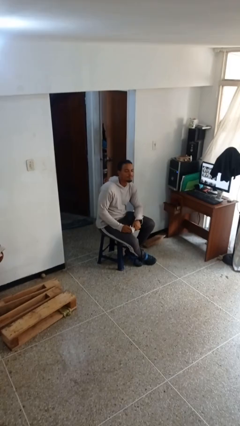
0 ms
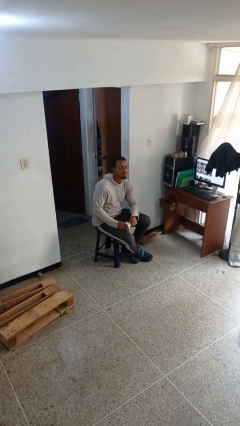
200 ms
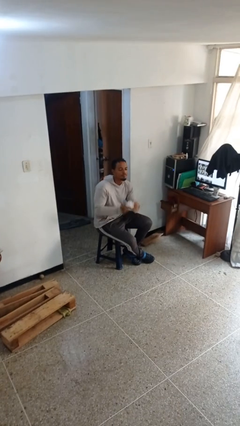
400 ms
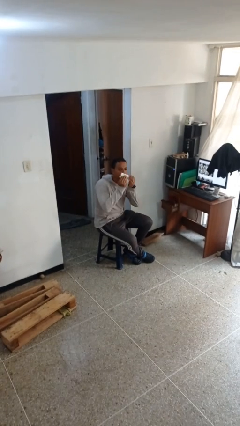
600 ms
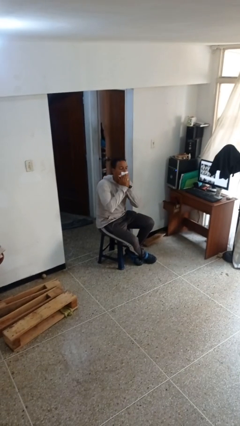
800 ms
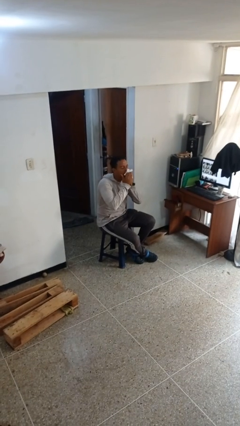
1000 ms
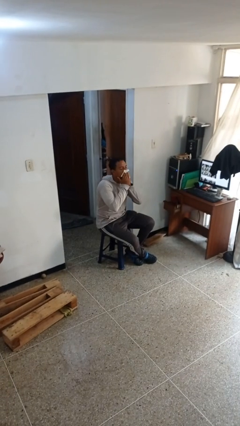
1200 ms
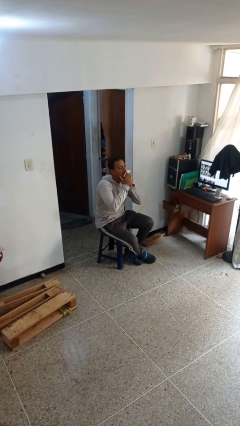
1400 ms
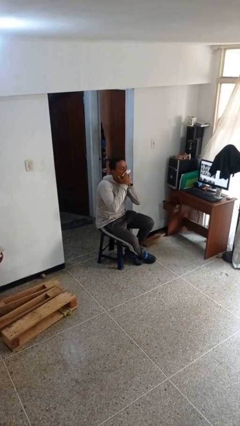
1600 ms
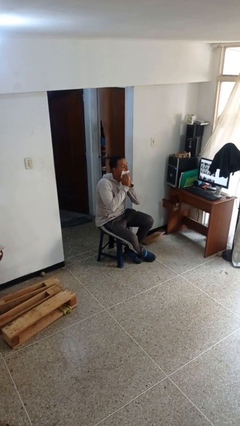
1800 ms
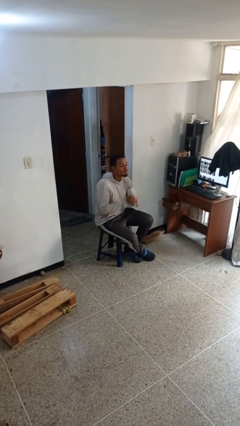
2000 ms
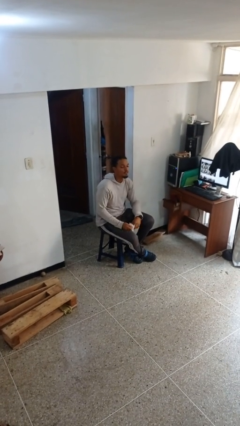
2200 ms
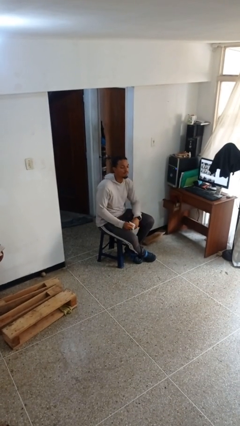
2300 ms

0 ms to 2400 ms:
person wipes mouth with napkin

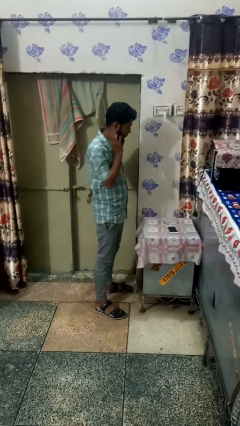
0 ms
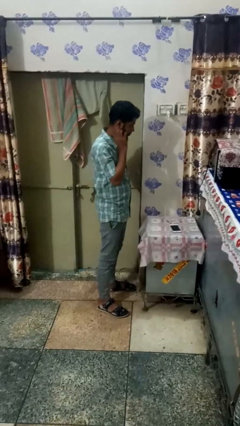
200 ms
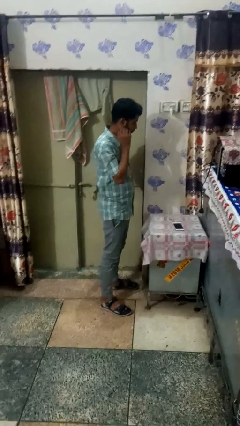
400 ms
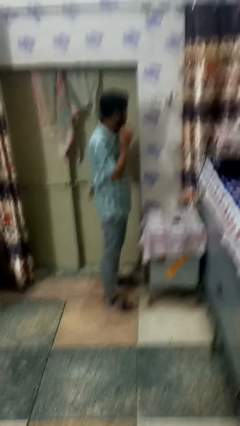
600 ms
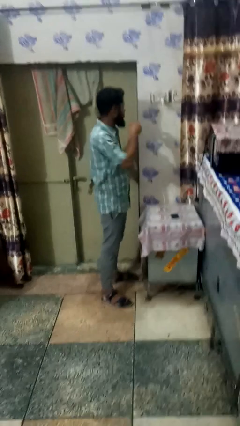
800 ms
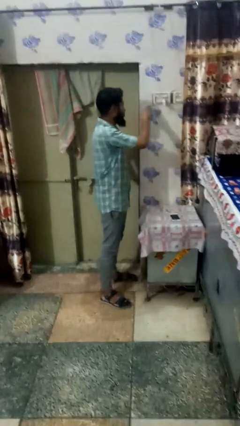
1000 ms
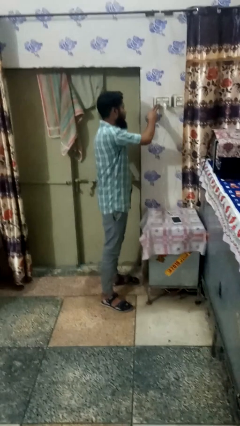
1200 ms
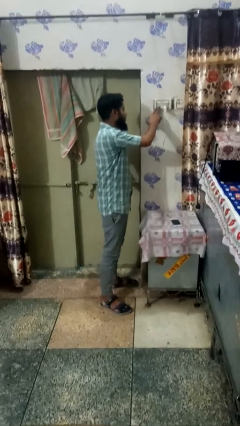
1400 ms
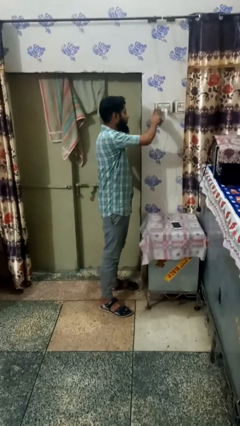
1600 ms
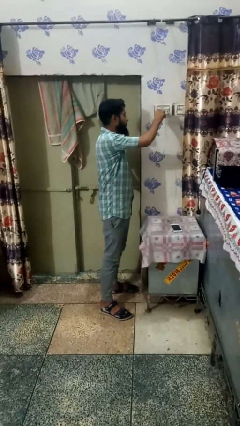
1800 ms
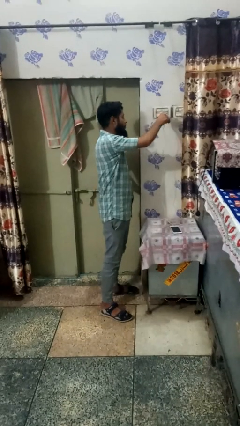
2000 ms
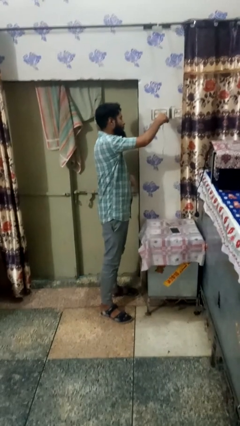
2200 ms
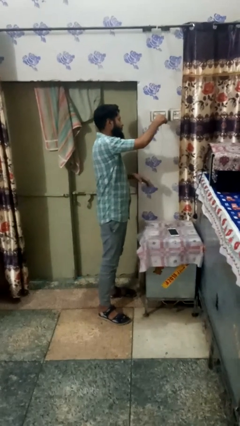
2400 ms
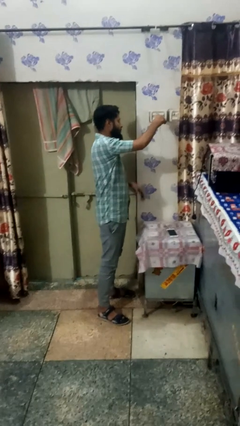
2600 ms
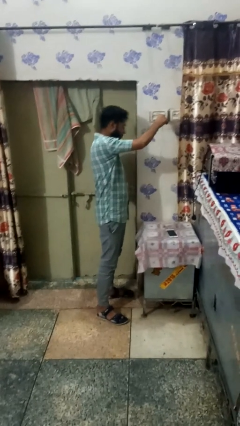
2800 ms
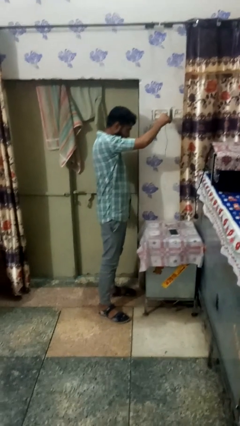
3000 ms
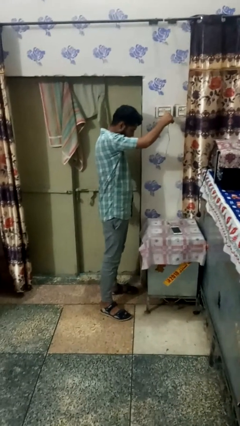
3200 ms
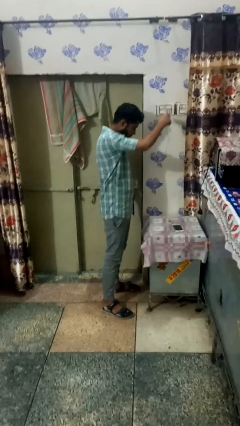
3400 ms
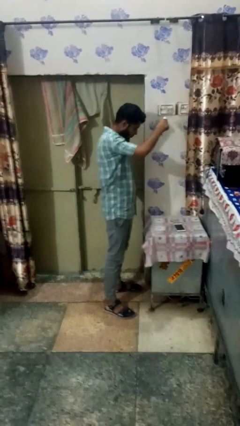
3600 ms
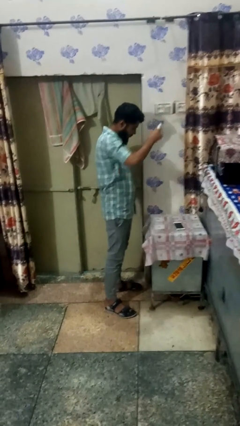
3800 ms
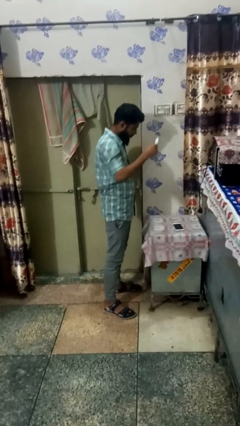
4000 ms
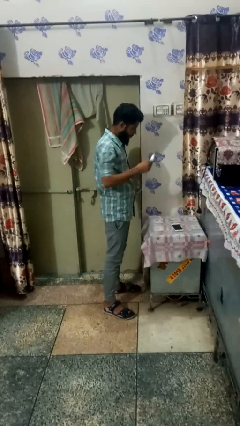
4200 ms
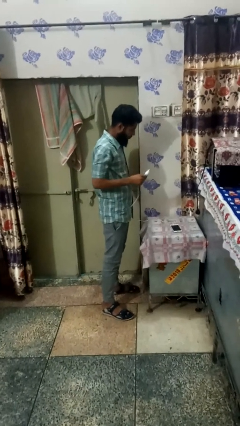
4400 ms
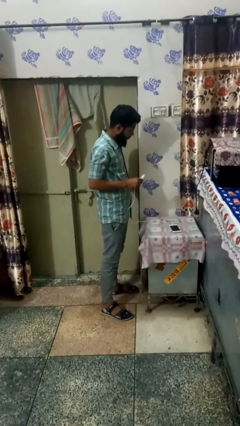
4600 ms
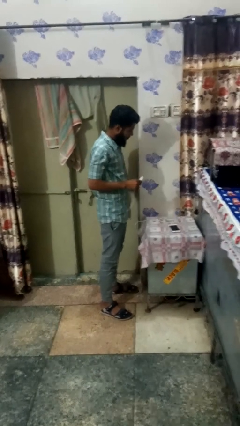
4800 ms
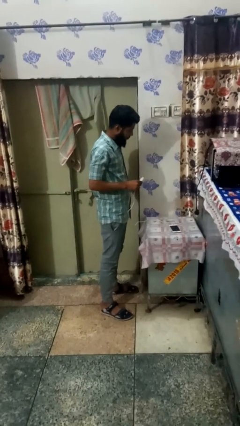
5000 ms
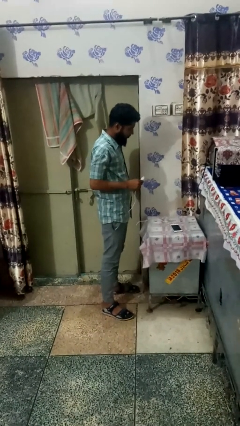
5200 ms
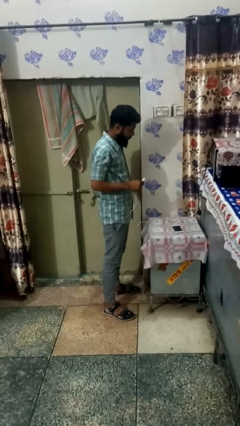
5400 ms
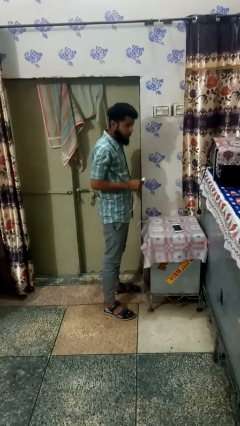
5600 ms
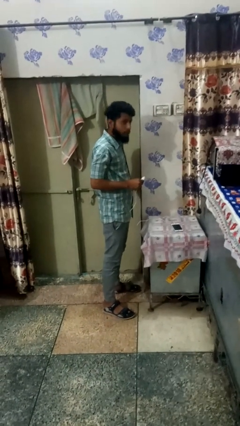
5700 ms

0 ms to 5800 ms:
person unplugs from electrical socket

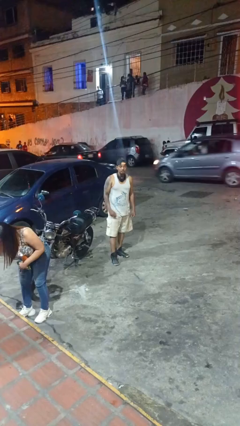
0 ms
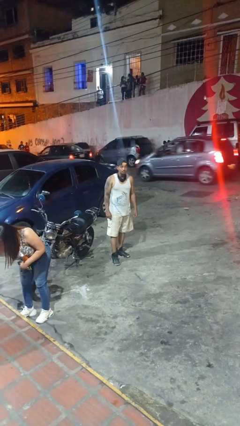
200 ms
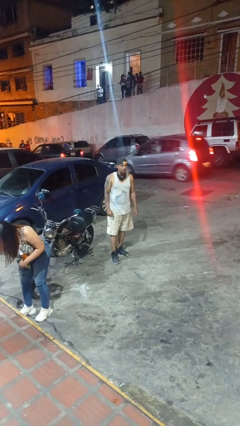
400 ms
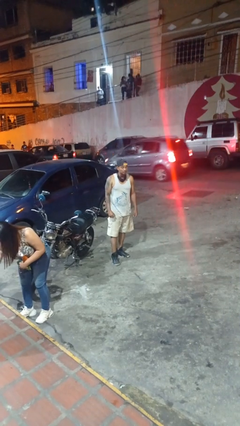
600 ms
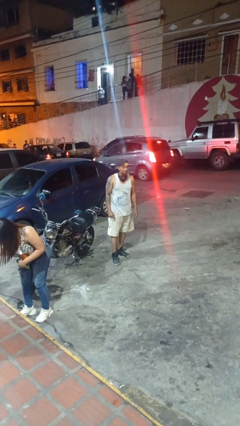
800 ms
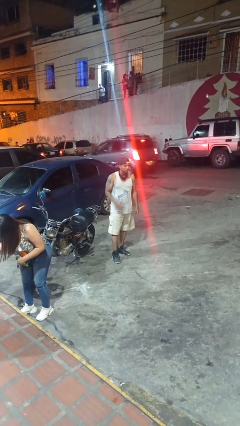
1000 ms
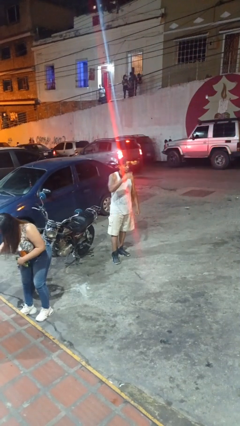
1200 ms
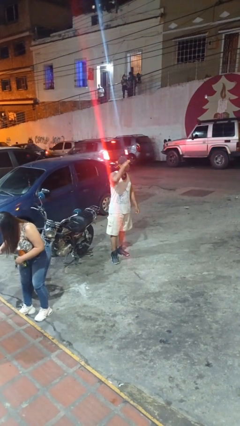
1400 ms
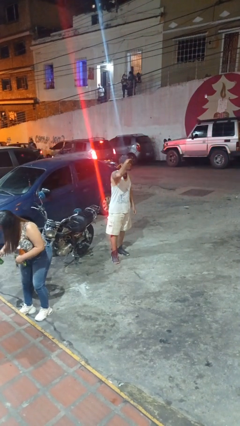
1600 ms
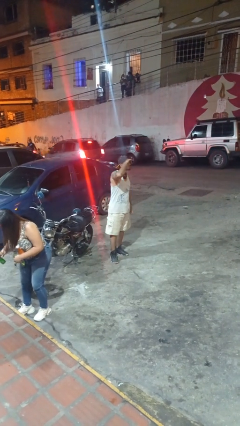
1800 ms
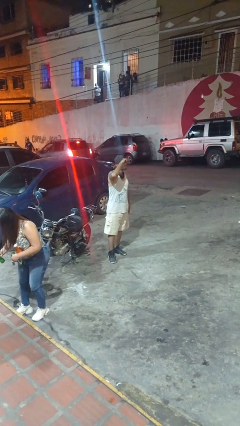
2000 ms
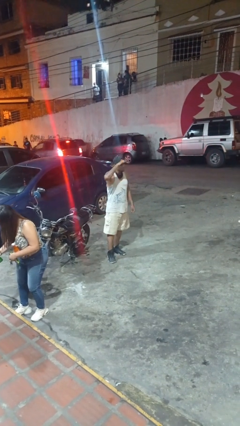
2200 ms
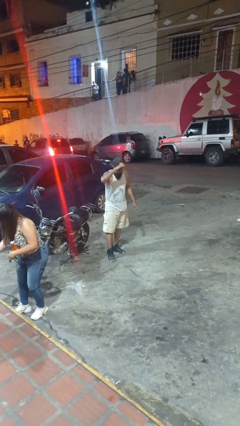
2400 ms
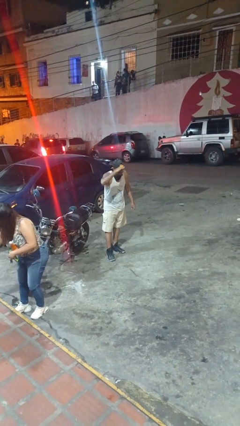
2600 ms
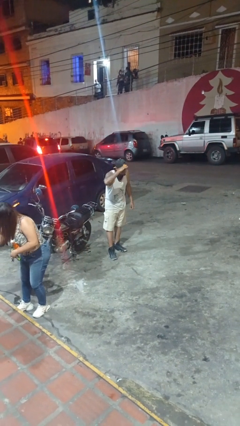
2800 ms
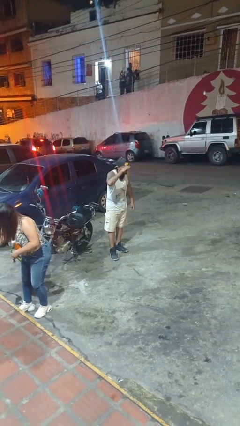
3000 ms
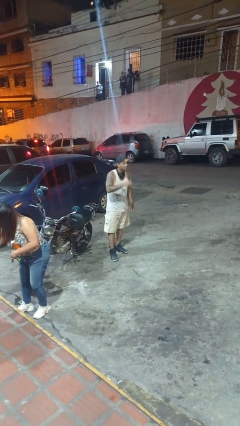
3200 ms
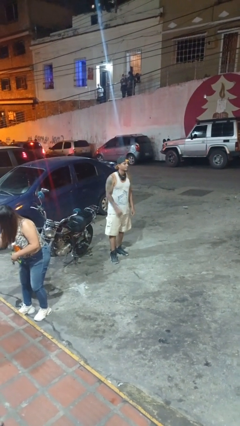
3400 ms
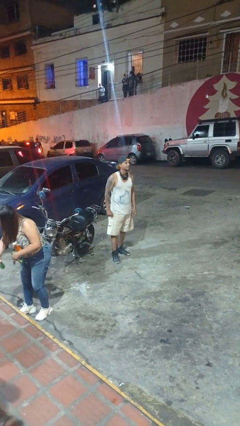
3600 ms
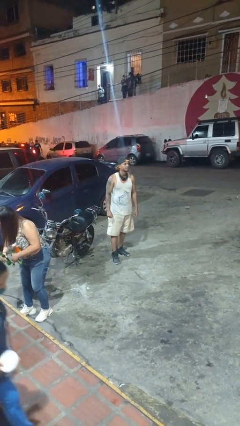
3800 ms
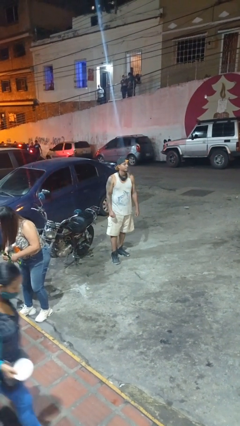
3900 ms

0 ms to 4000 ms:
person shades eyes

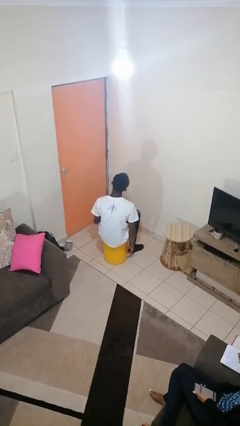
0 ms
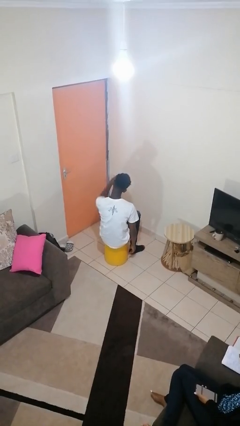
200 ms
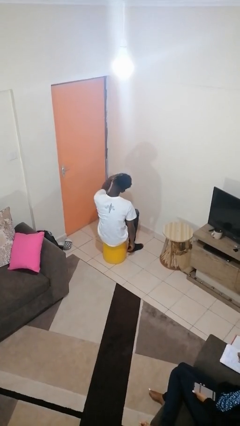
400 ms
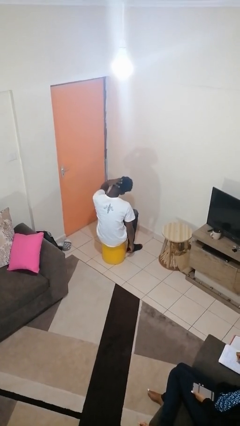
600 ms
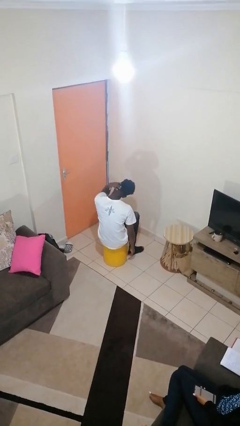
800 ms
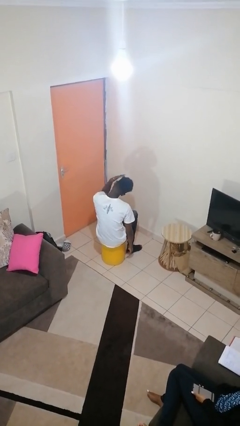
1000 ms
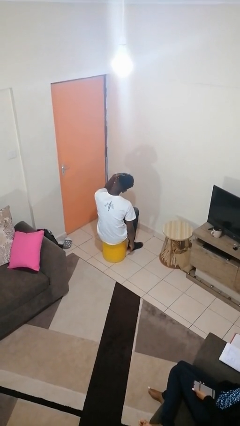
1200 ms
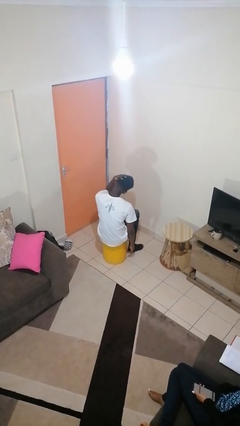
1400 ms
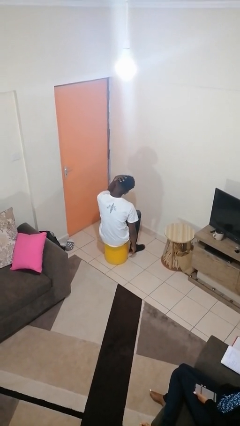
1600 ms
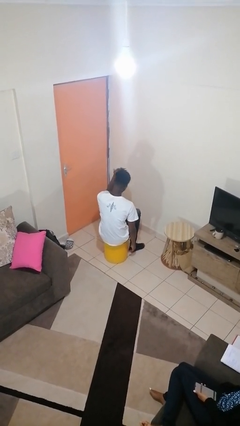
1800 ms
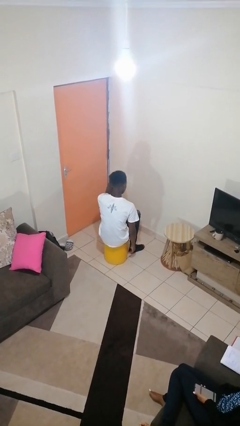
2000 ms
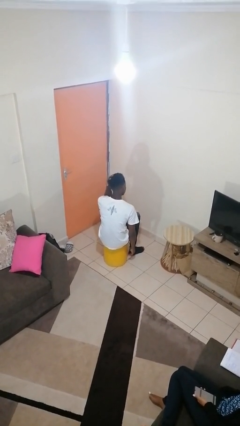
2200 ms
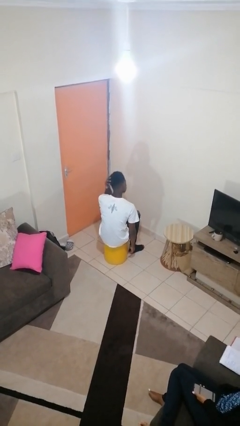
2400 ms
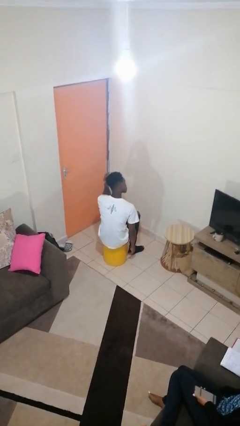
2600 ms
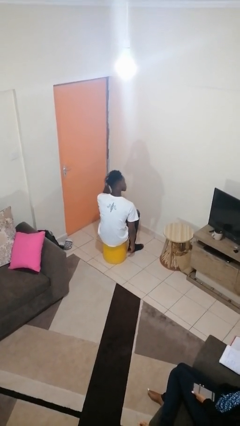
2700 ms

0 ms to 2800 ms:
person strokes hair

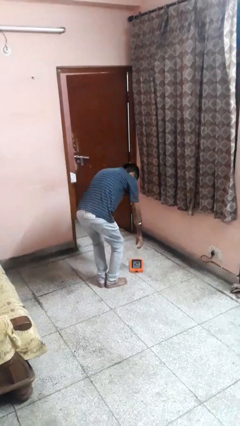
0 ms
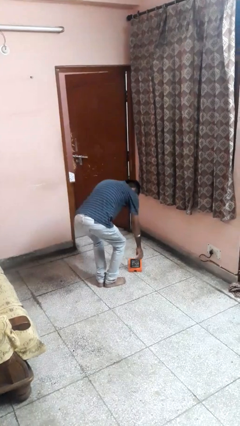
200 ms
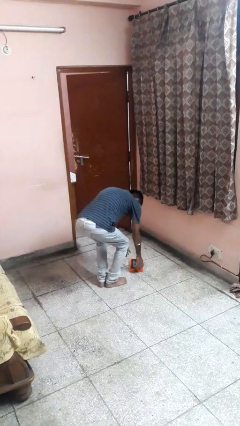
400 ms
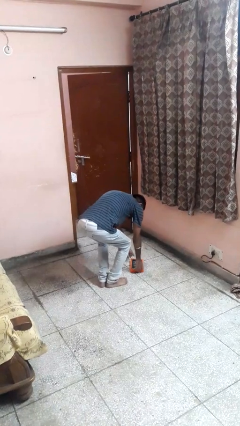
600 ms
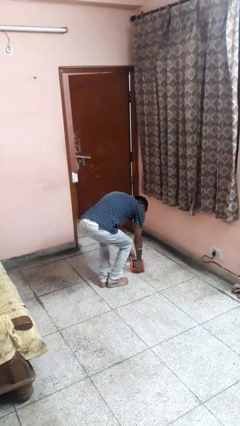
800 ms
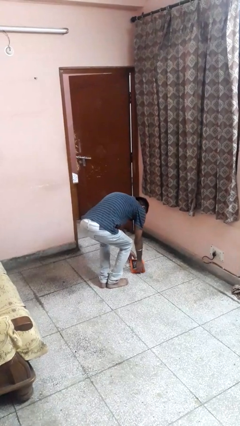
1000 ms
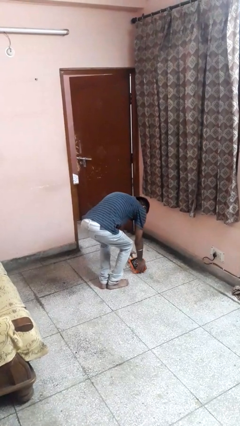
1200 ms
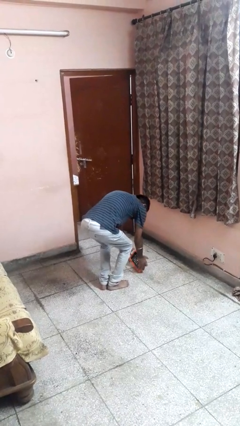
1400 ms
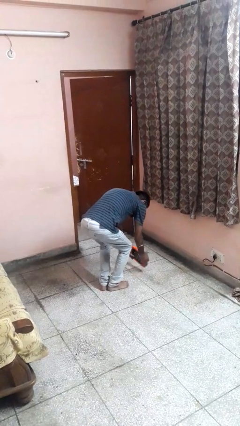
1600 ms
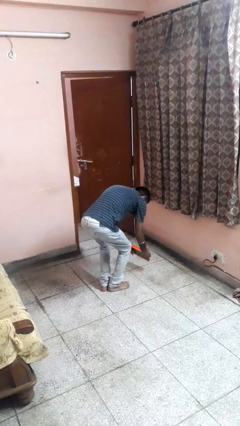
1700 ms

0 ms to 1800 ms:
person picks up object from floor

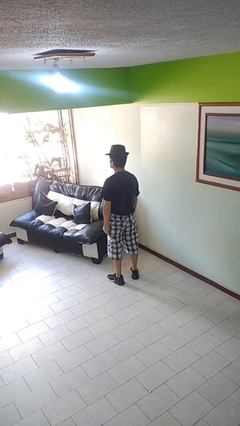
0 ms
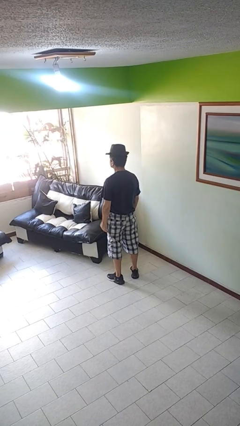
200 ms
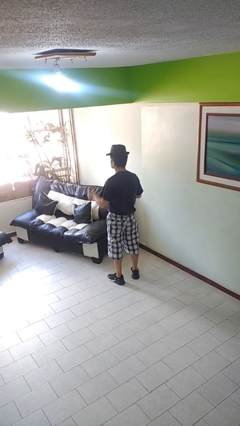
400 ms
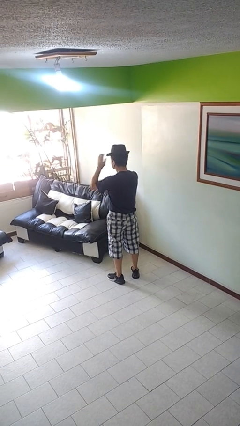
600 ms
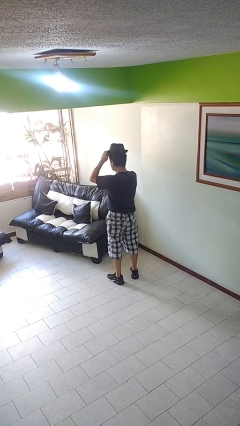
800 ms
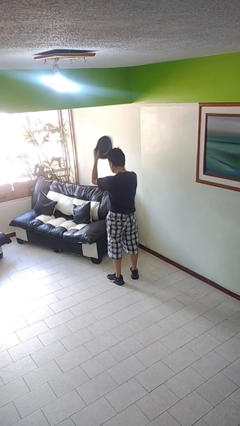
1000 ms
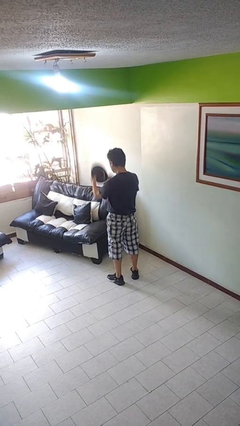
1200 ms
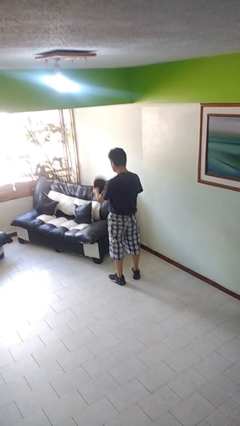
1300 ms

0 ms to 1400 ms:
person takes off hat
